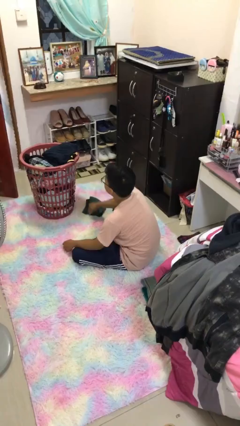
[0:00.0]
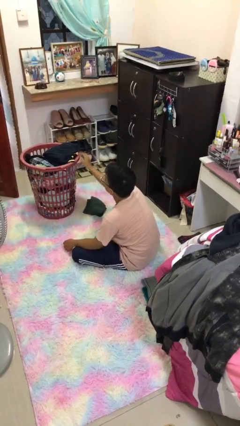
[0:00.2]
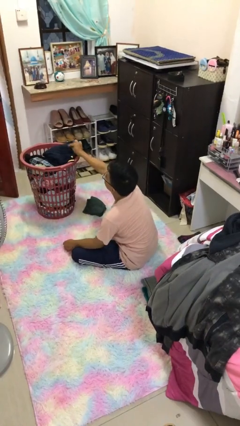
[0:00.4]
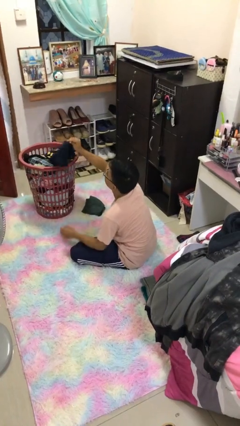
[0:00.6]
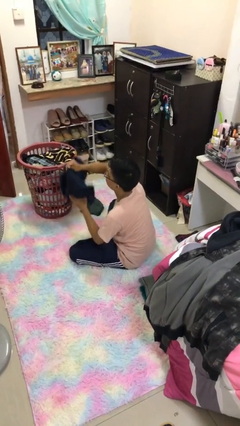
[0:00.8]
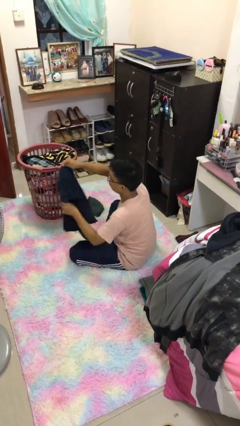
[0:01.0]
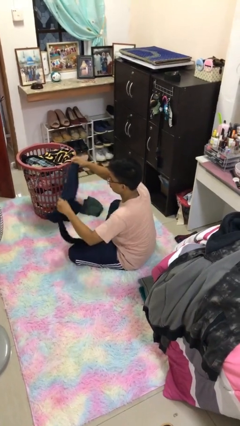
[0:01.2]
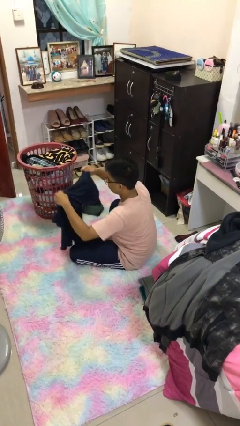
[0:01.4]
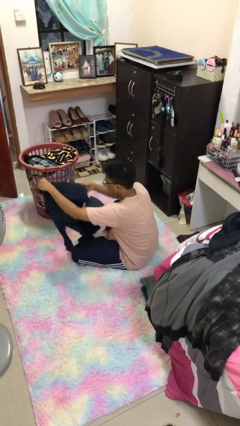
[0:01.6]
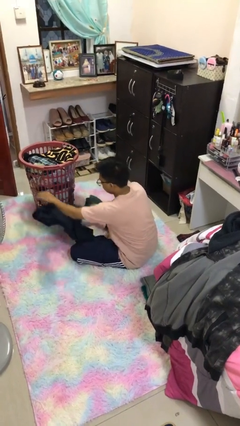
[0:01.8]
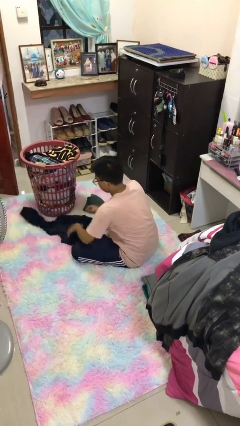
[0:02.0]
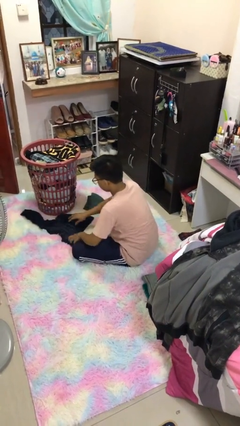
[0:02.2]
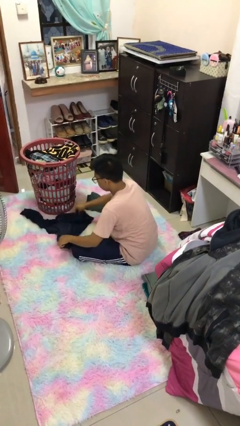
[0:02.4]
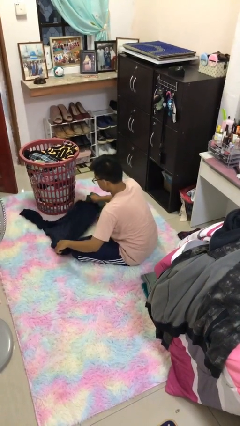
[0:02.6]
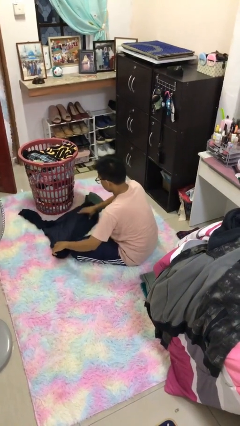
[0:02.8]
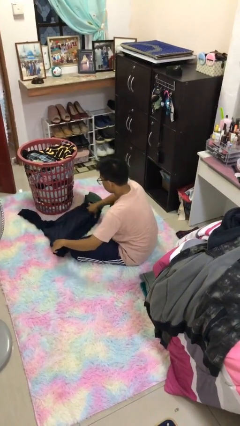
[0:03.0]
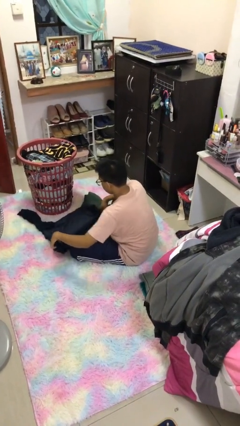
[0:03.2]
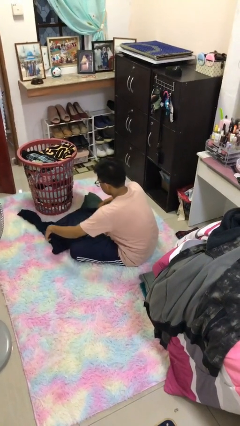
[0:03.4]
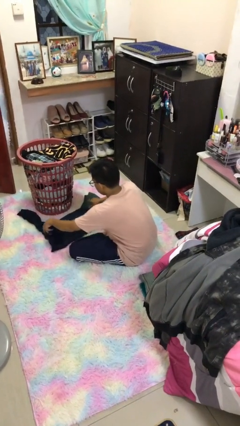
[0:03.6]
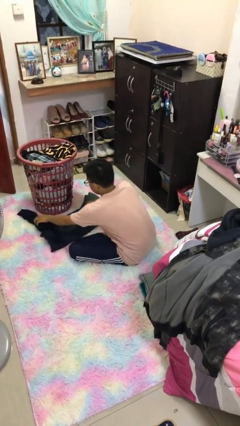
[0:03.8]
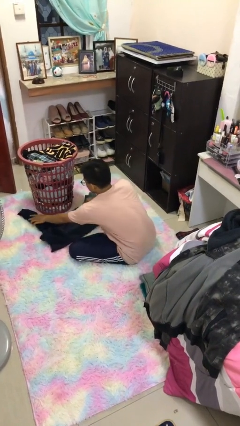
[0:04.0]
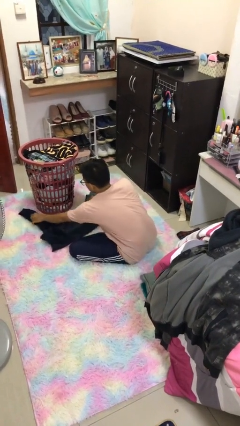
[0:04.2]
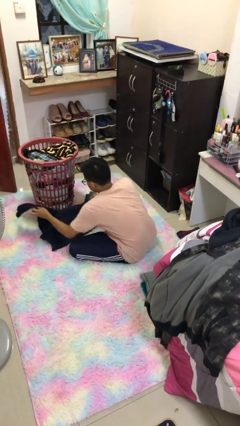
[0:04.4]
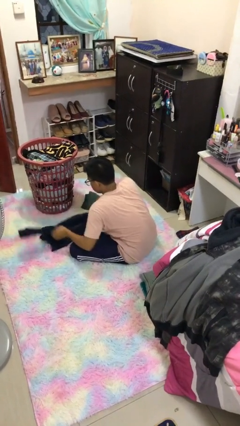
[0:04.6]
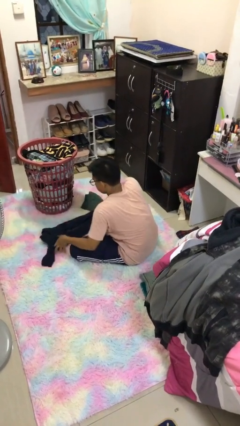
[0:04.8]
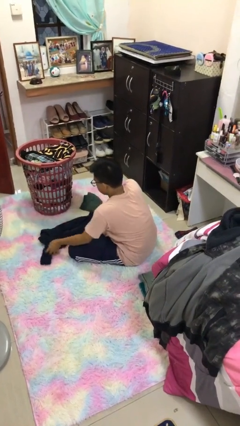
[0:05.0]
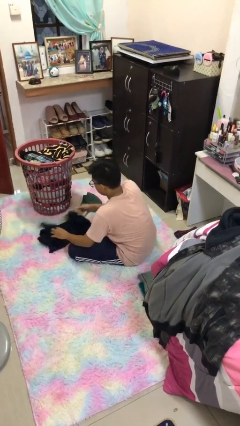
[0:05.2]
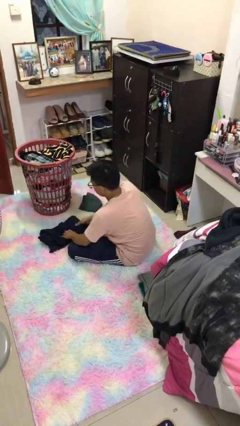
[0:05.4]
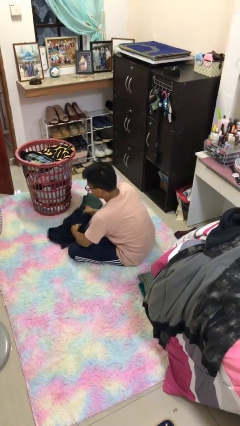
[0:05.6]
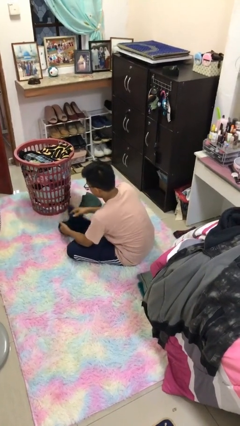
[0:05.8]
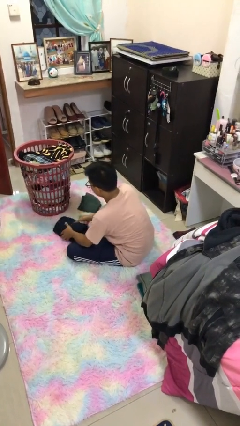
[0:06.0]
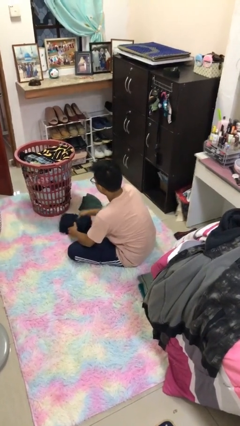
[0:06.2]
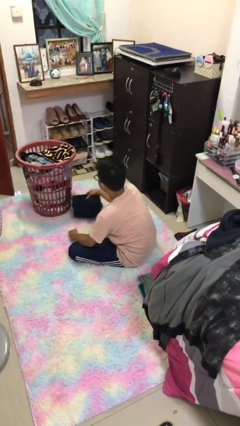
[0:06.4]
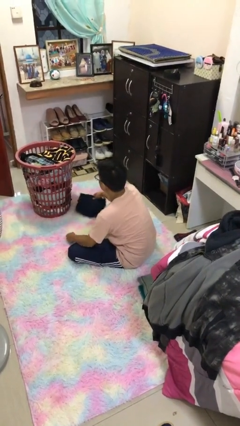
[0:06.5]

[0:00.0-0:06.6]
person folds shirt

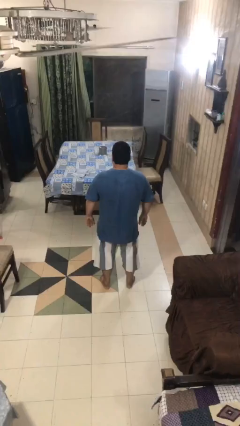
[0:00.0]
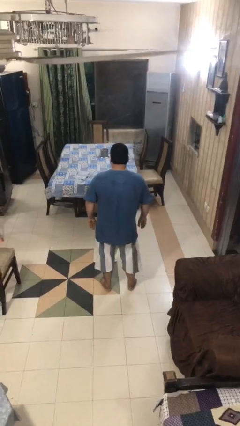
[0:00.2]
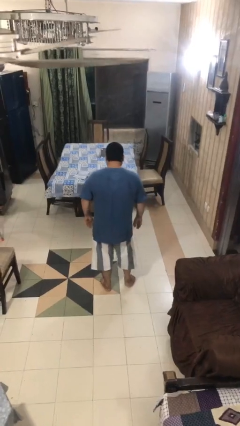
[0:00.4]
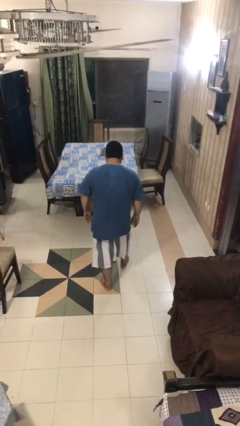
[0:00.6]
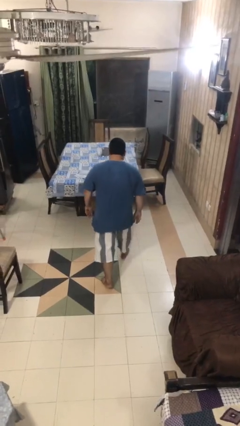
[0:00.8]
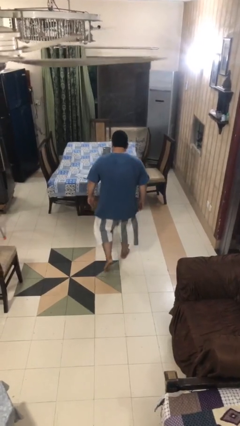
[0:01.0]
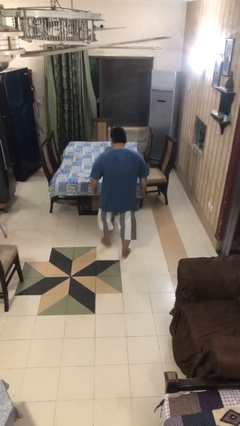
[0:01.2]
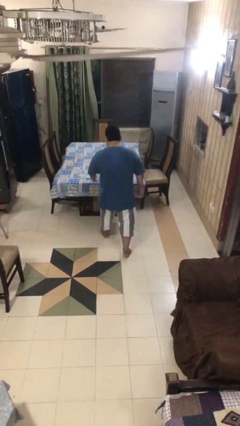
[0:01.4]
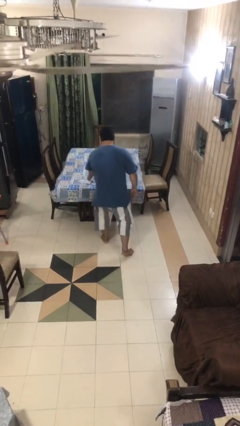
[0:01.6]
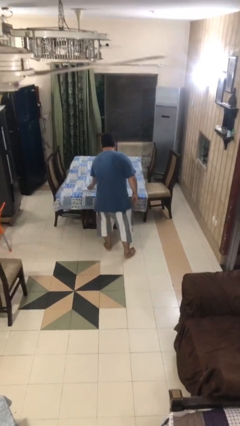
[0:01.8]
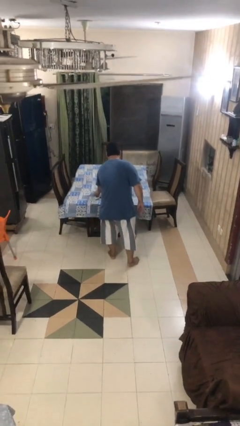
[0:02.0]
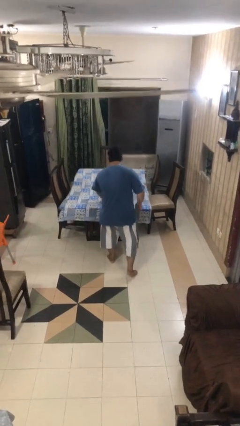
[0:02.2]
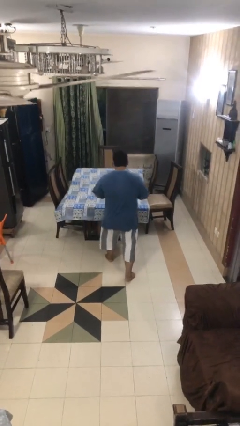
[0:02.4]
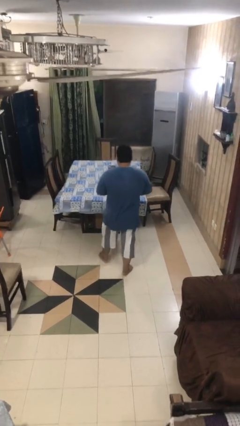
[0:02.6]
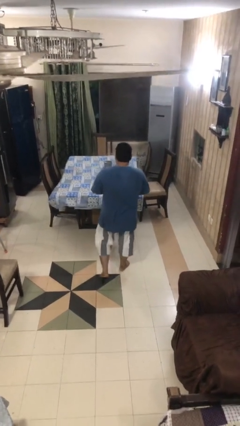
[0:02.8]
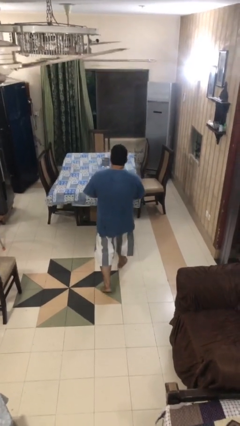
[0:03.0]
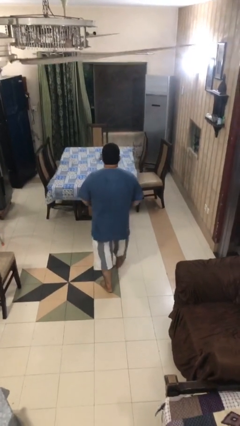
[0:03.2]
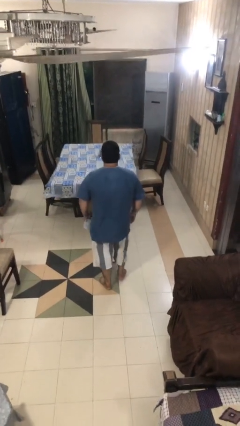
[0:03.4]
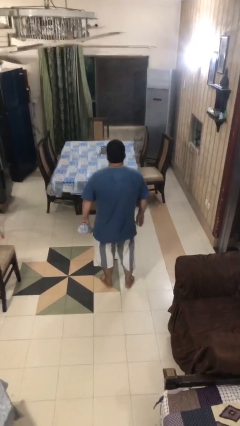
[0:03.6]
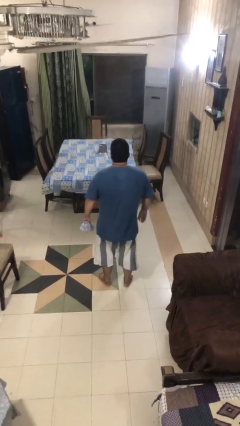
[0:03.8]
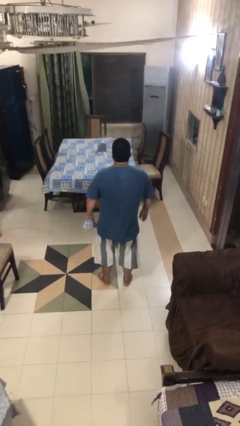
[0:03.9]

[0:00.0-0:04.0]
person picks up object from table

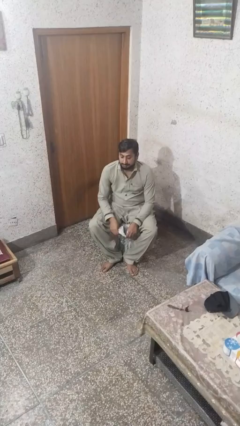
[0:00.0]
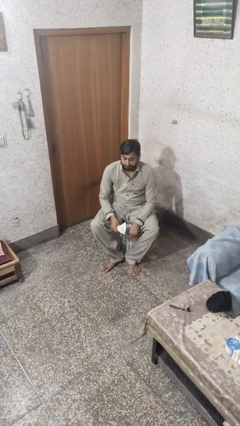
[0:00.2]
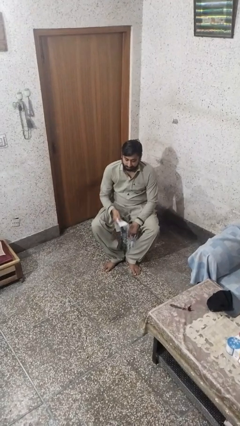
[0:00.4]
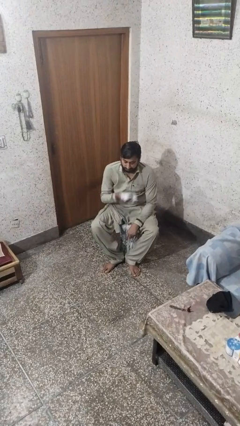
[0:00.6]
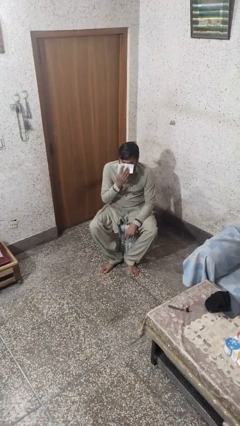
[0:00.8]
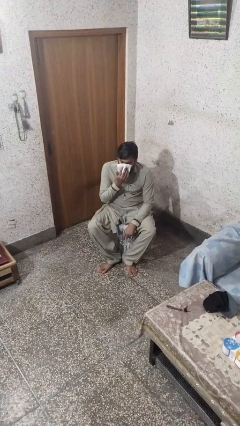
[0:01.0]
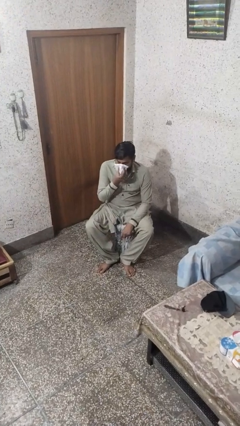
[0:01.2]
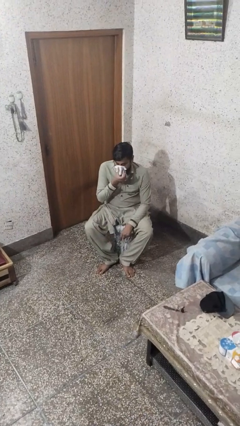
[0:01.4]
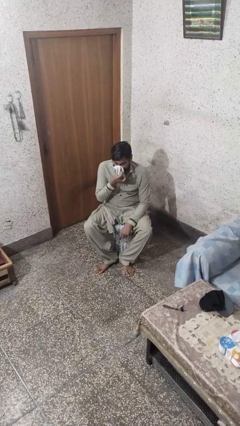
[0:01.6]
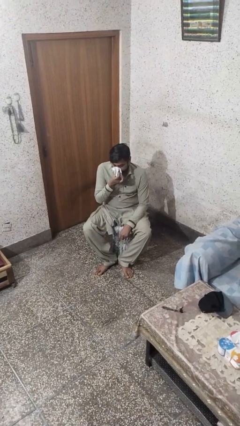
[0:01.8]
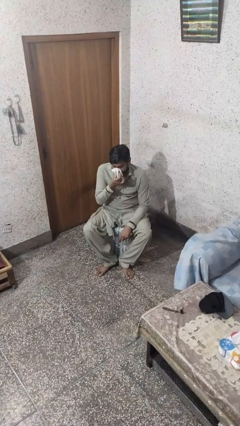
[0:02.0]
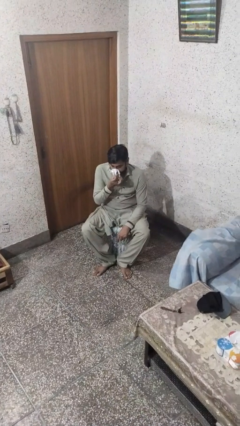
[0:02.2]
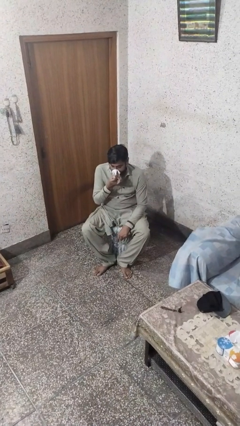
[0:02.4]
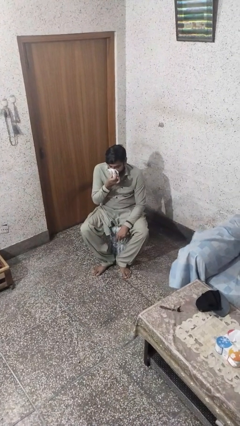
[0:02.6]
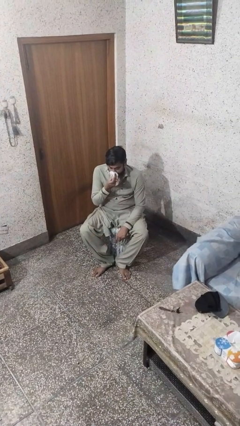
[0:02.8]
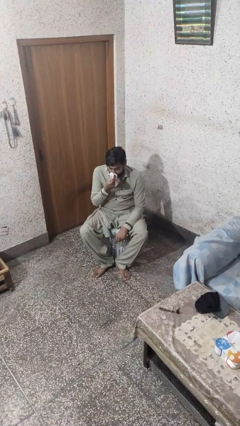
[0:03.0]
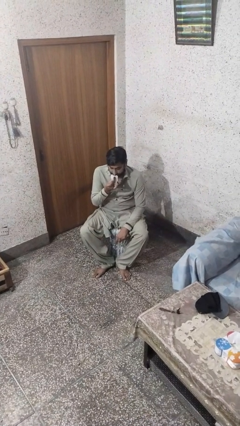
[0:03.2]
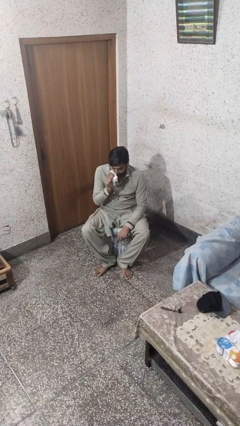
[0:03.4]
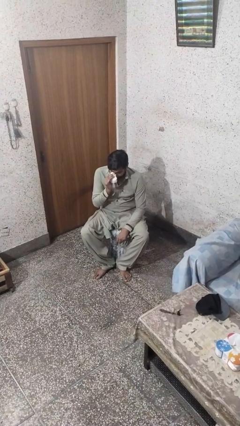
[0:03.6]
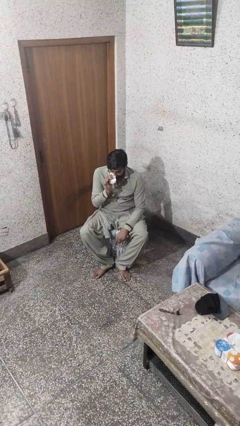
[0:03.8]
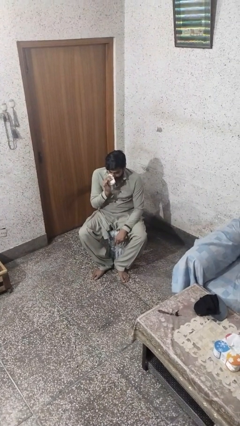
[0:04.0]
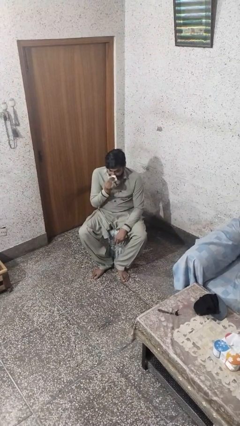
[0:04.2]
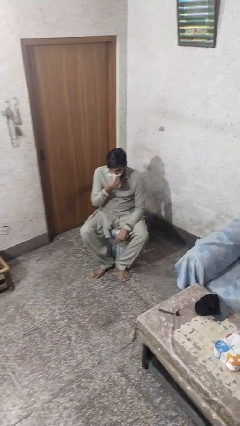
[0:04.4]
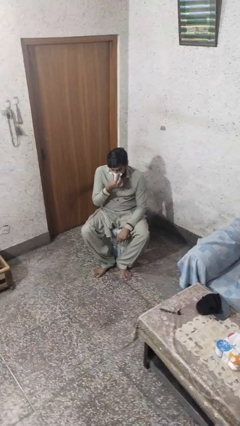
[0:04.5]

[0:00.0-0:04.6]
person blows nose

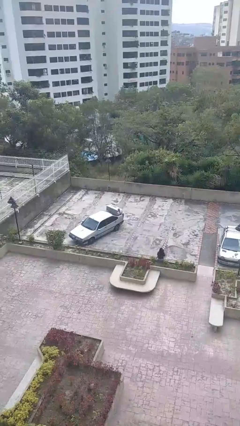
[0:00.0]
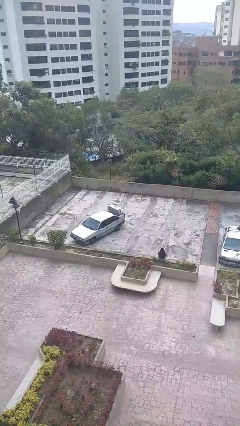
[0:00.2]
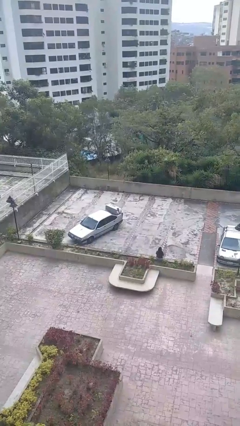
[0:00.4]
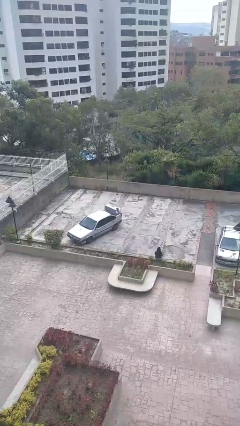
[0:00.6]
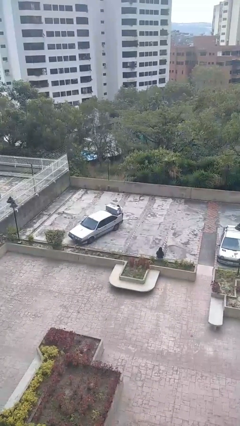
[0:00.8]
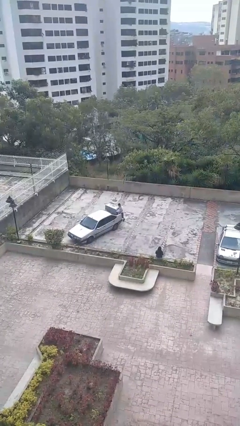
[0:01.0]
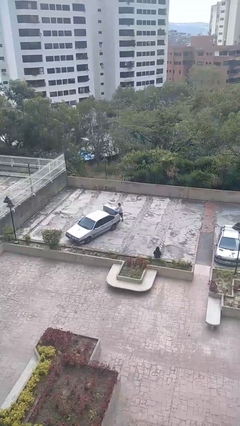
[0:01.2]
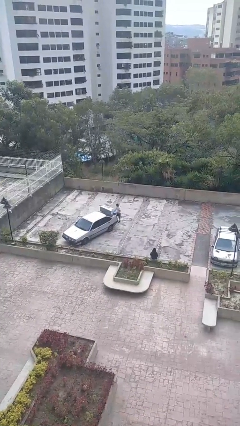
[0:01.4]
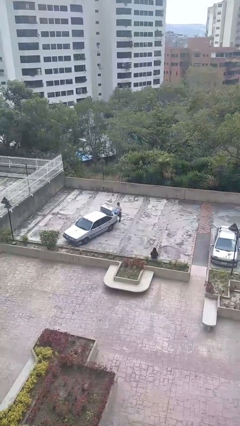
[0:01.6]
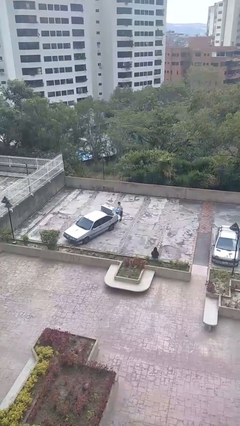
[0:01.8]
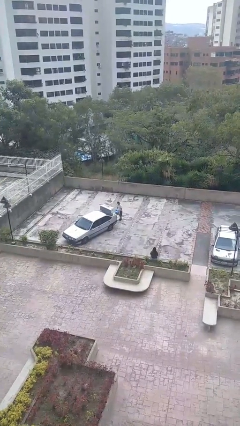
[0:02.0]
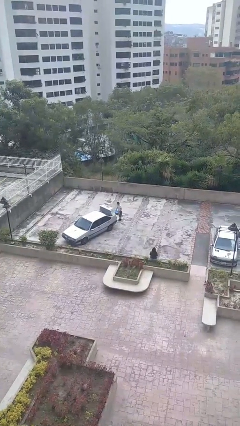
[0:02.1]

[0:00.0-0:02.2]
person unloads car

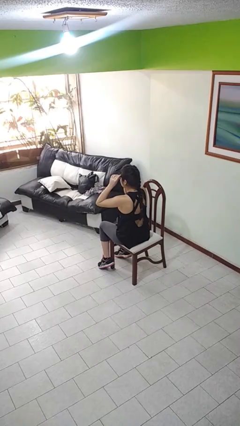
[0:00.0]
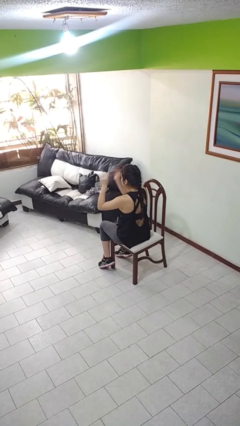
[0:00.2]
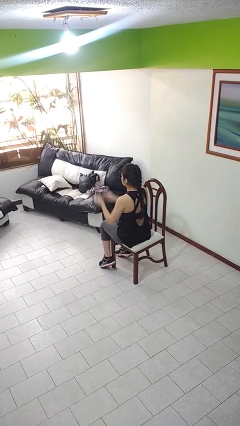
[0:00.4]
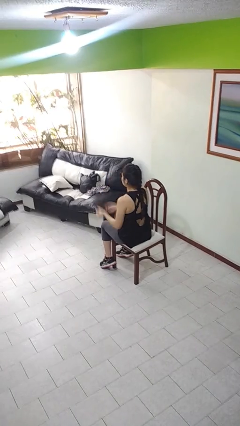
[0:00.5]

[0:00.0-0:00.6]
person takes off glasses
